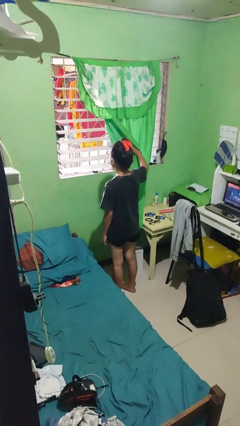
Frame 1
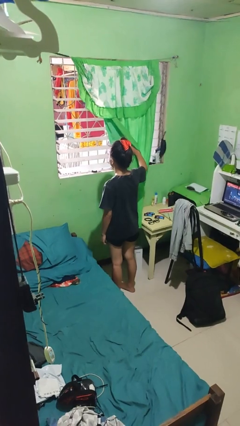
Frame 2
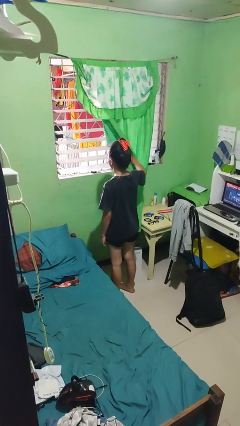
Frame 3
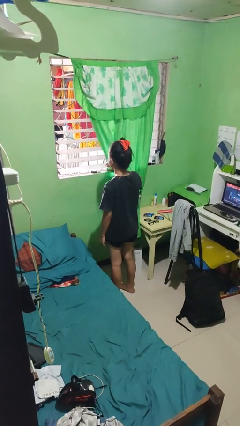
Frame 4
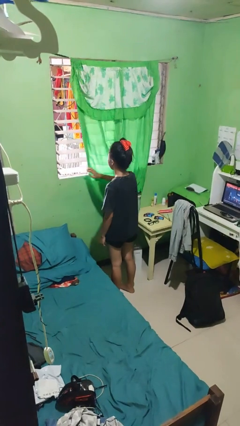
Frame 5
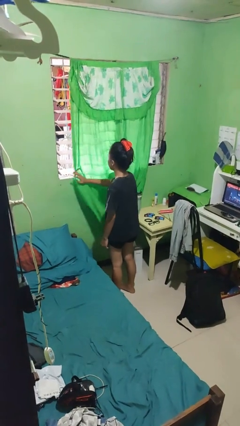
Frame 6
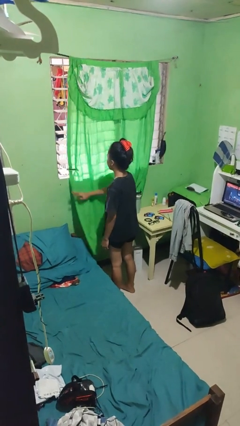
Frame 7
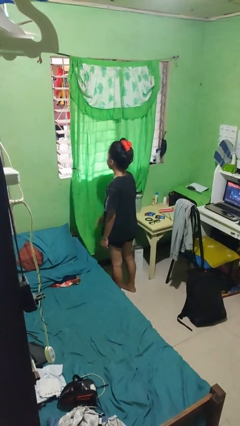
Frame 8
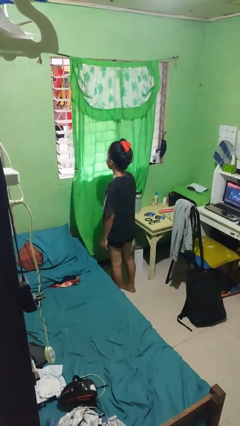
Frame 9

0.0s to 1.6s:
person closes curtains

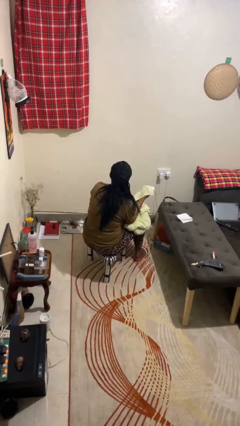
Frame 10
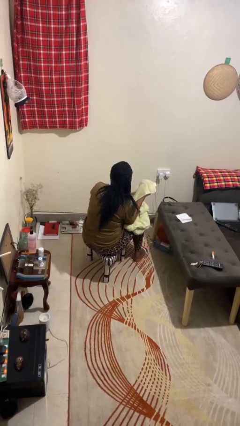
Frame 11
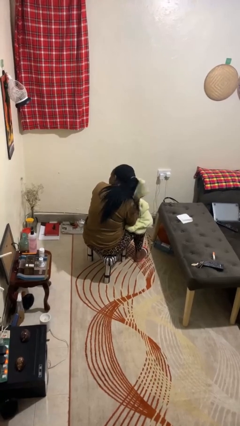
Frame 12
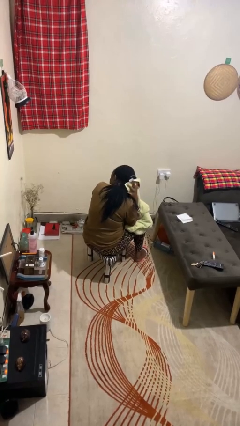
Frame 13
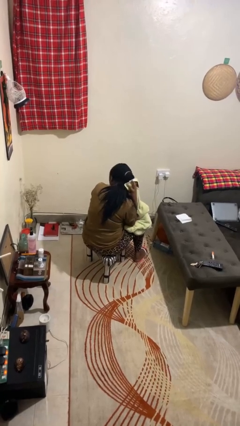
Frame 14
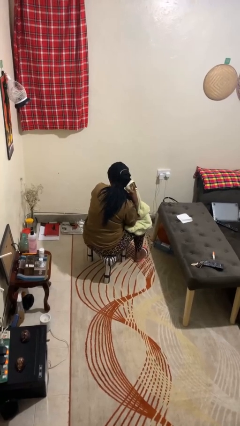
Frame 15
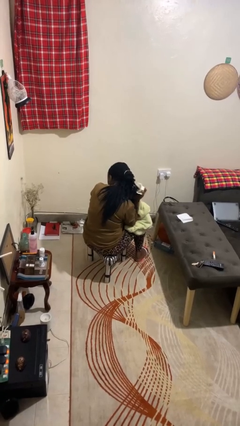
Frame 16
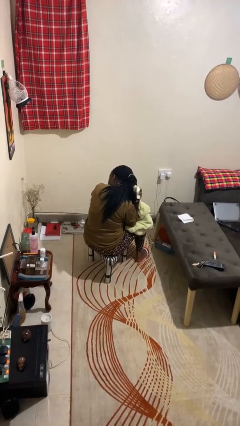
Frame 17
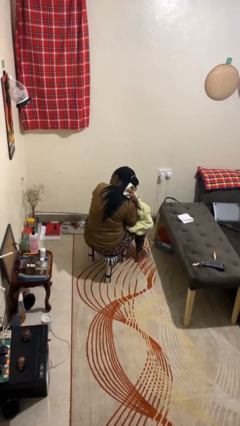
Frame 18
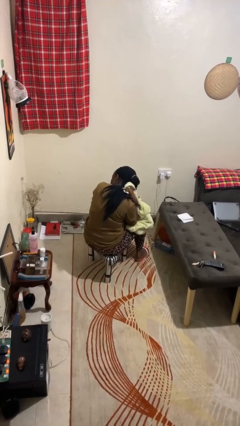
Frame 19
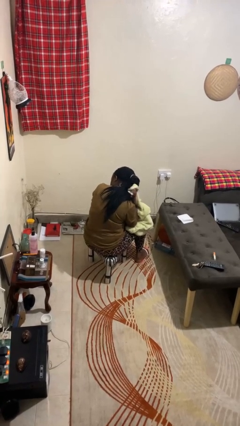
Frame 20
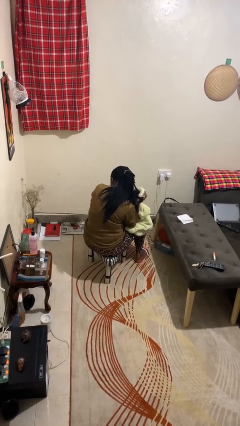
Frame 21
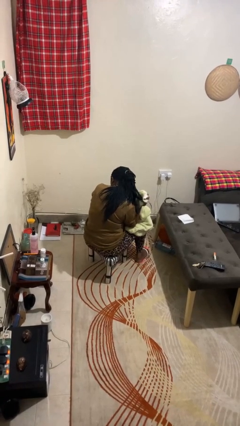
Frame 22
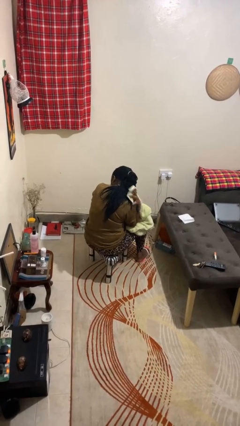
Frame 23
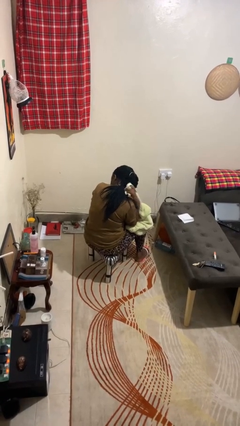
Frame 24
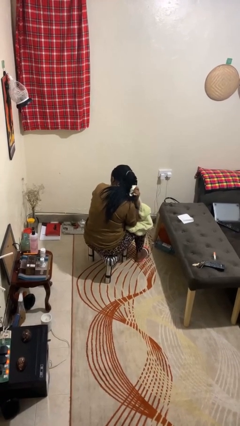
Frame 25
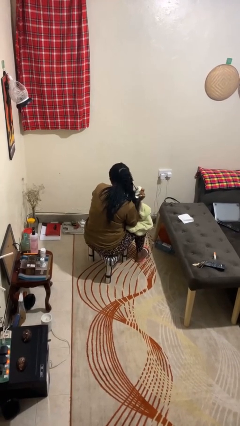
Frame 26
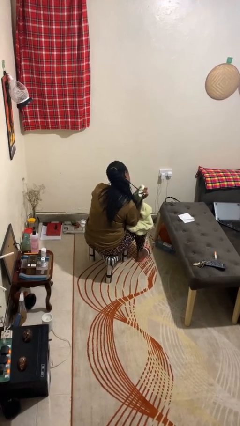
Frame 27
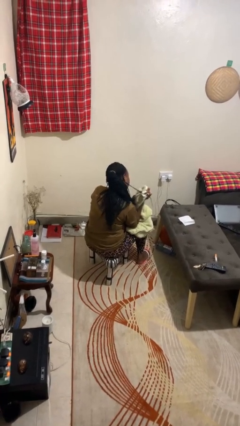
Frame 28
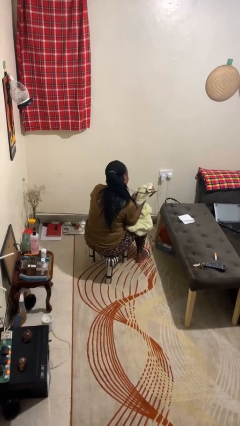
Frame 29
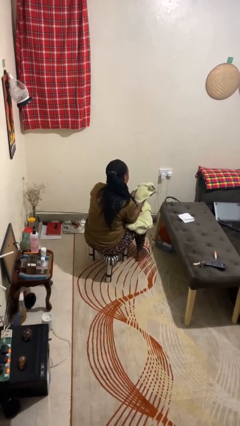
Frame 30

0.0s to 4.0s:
person dries hair with towel

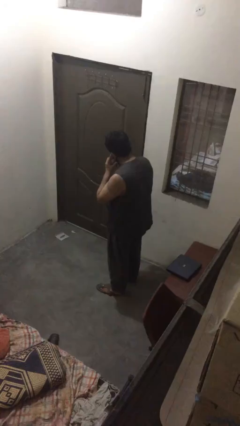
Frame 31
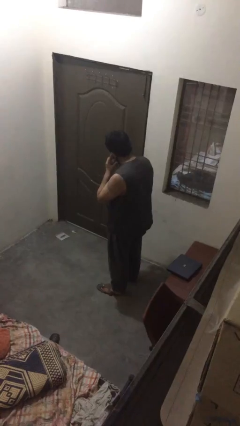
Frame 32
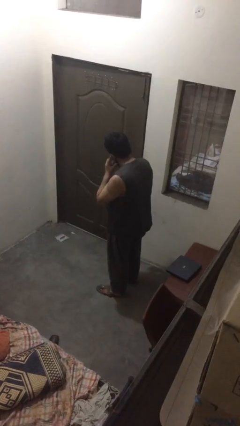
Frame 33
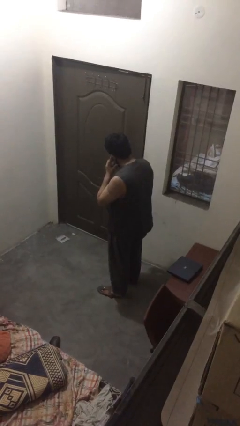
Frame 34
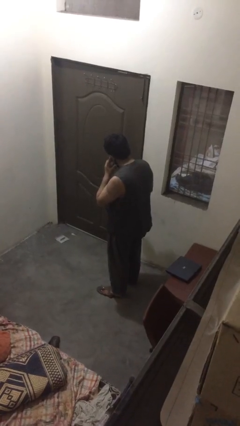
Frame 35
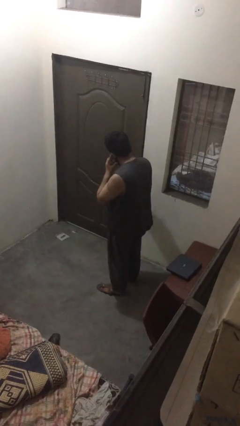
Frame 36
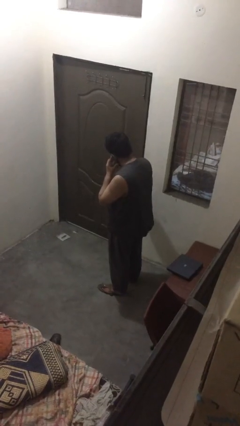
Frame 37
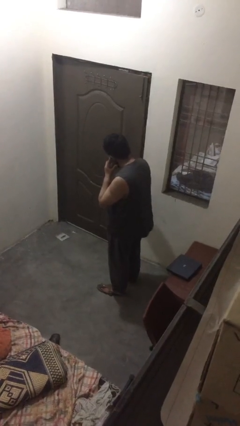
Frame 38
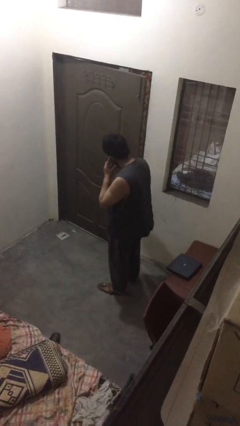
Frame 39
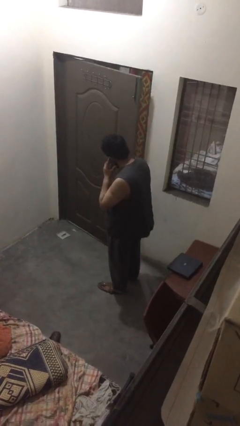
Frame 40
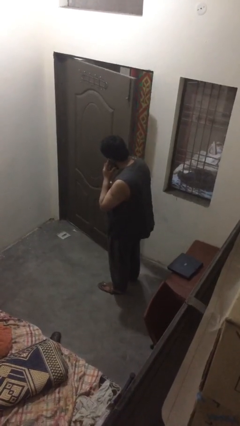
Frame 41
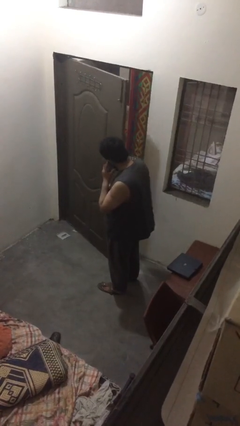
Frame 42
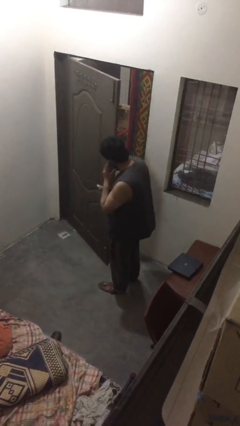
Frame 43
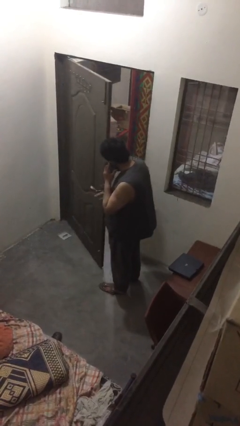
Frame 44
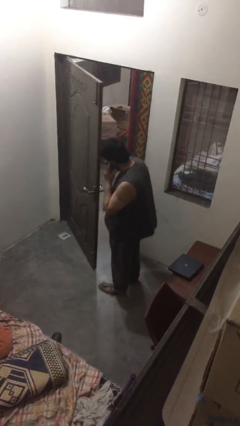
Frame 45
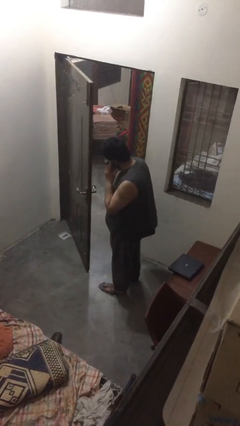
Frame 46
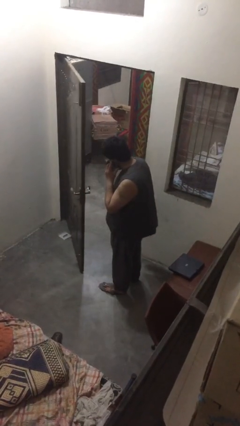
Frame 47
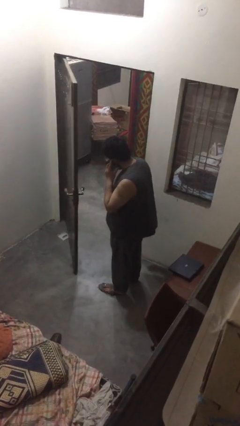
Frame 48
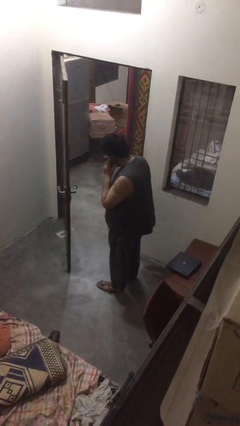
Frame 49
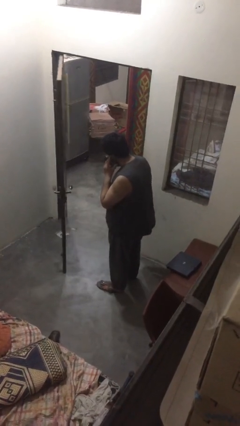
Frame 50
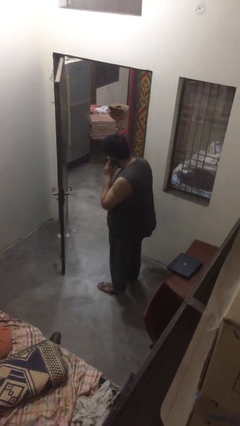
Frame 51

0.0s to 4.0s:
person opens facility door

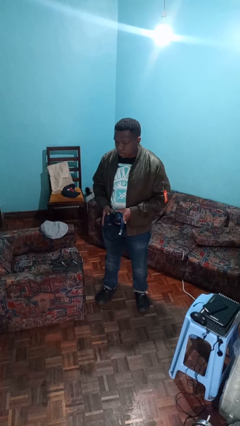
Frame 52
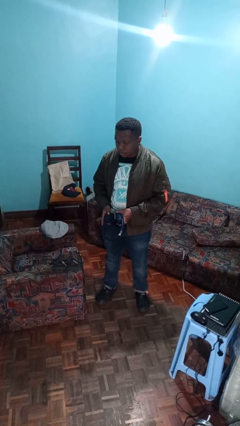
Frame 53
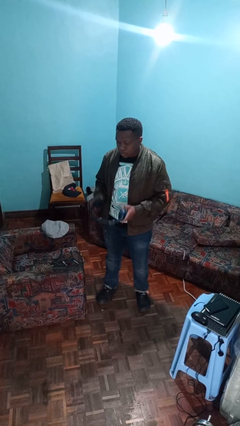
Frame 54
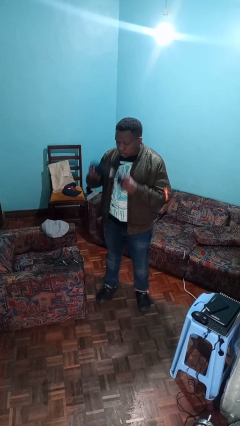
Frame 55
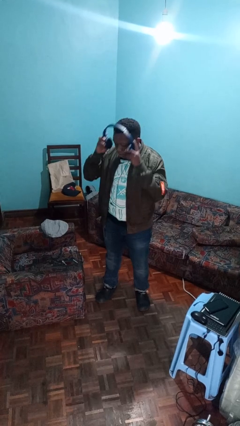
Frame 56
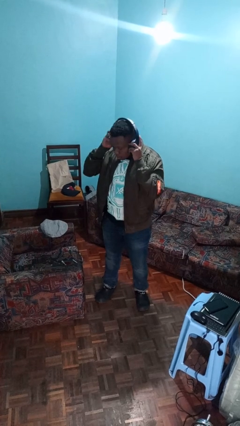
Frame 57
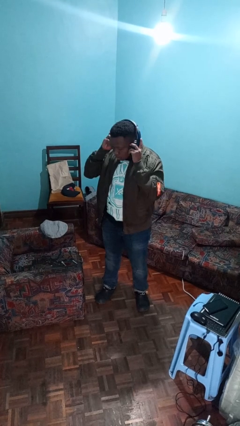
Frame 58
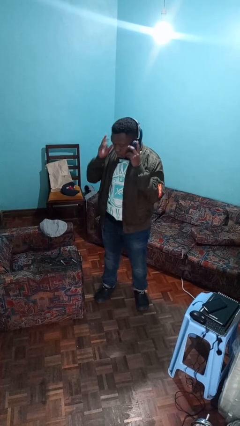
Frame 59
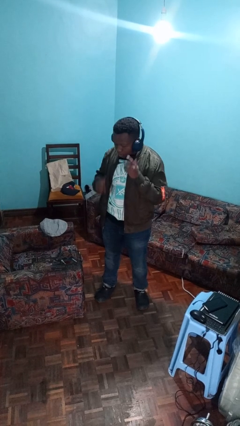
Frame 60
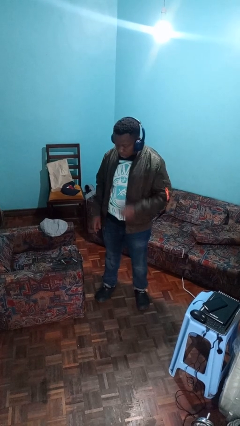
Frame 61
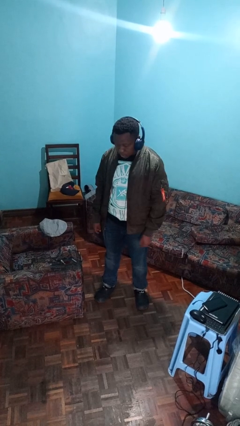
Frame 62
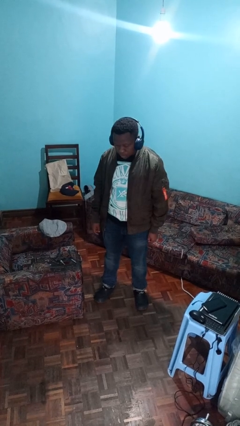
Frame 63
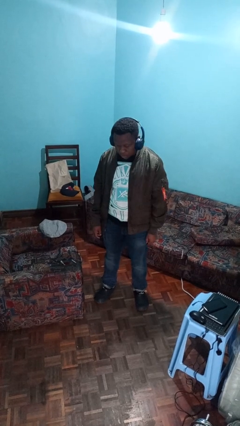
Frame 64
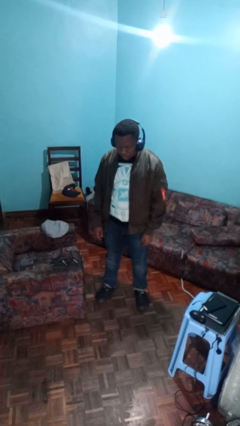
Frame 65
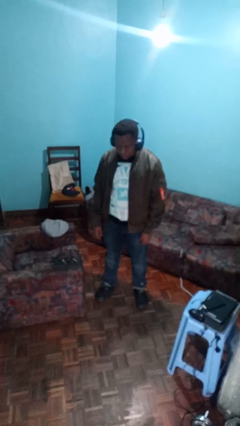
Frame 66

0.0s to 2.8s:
person puts on headphones

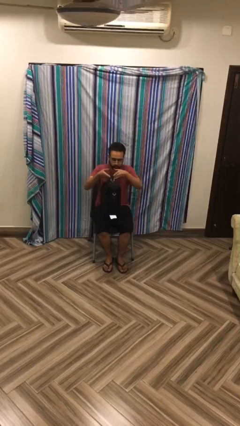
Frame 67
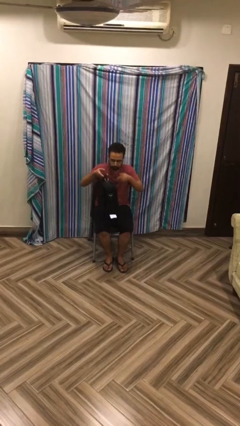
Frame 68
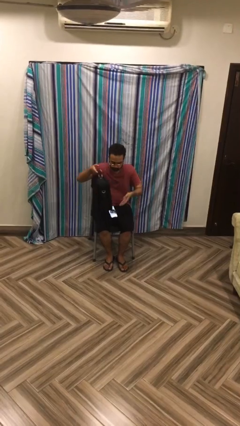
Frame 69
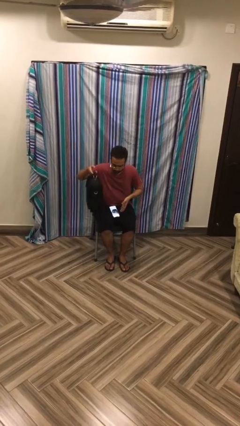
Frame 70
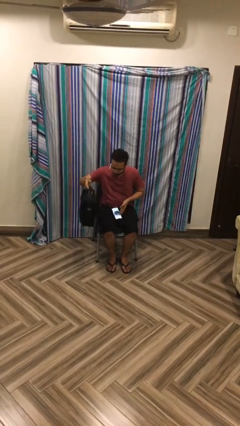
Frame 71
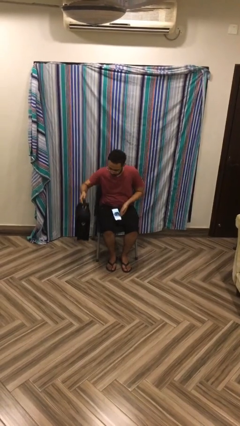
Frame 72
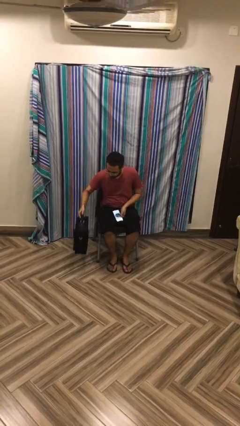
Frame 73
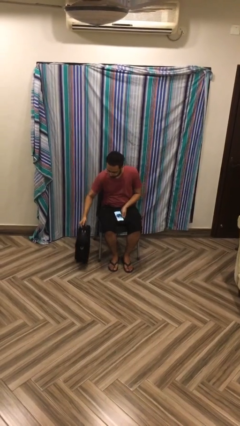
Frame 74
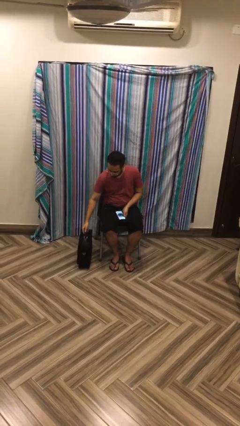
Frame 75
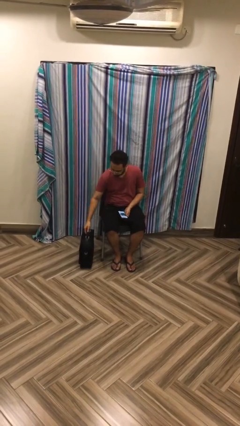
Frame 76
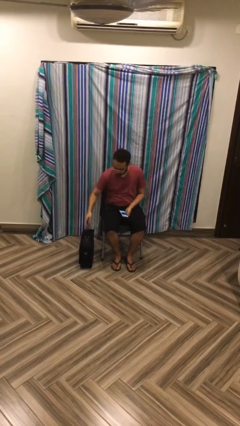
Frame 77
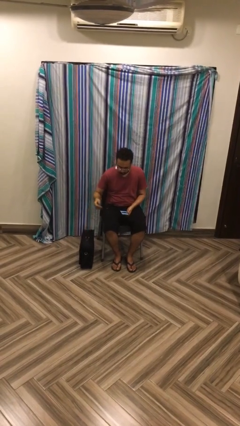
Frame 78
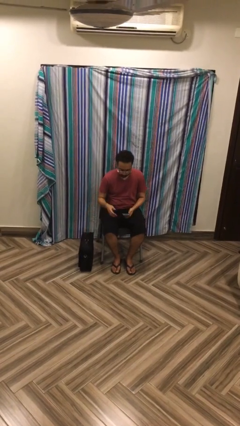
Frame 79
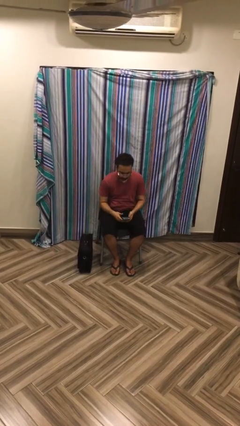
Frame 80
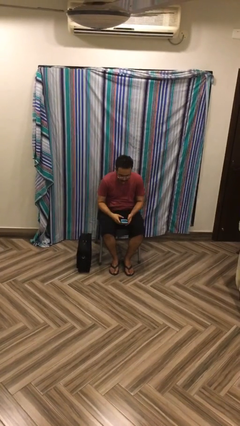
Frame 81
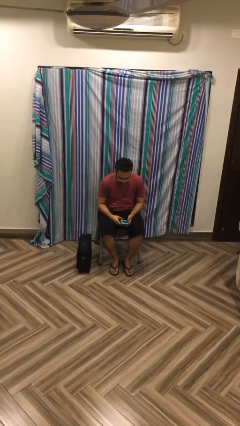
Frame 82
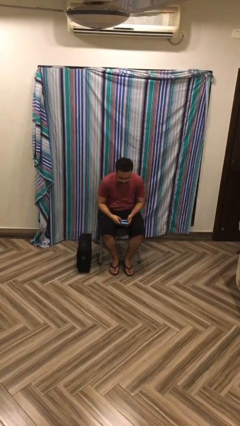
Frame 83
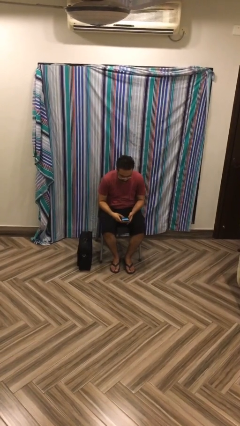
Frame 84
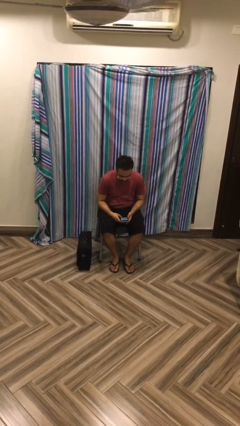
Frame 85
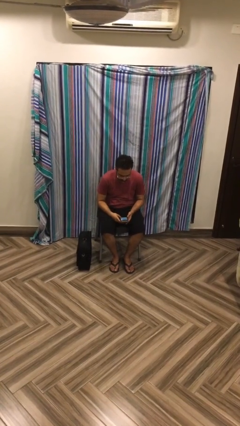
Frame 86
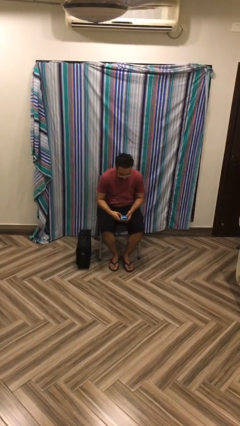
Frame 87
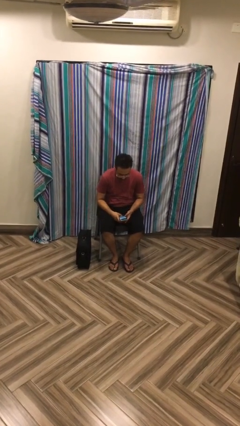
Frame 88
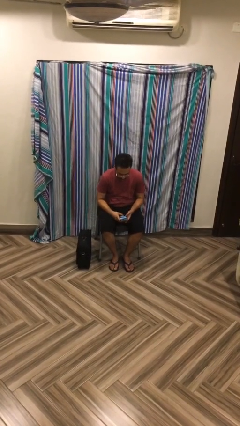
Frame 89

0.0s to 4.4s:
person puts down object on floor

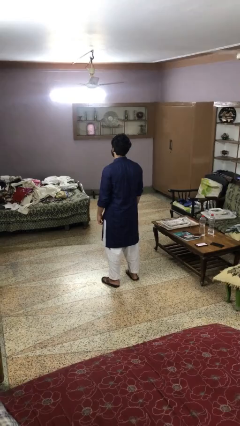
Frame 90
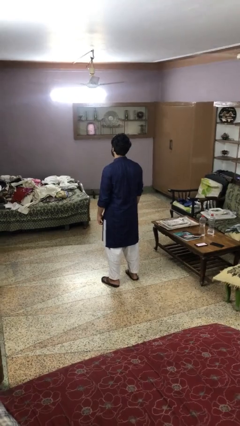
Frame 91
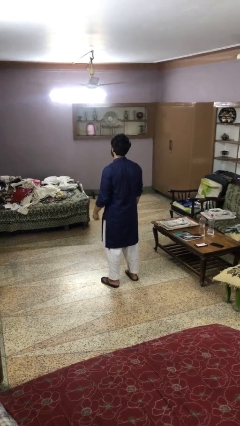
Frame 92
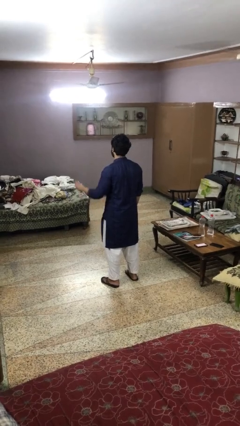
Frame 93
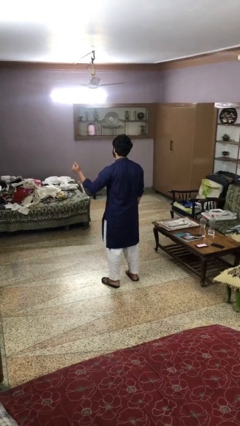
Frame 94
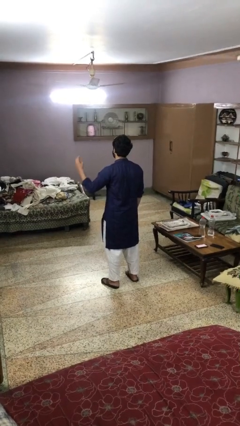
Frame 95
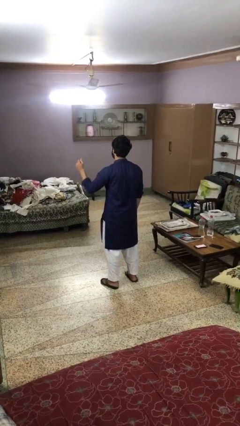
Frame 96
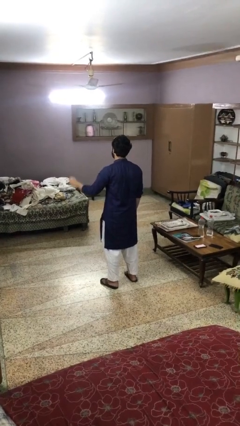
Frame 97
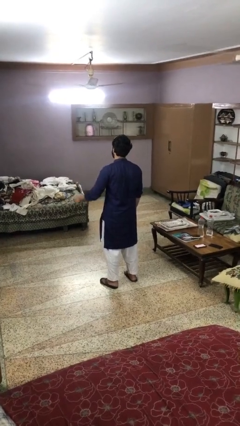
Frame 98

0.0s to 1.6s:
person snaps fingers
